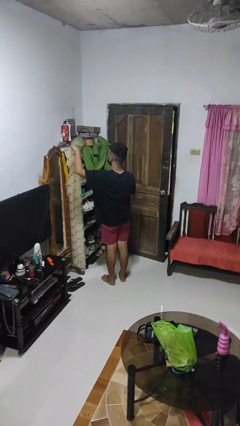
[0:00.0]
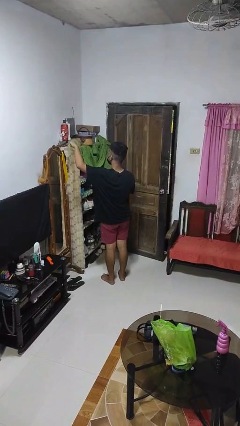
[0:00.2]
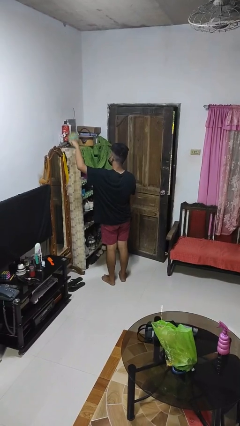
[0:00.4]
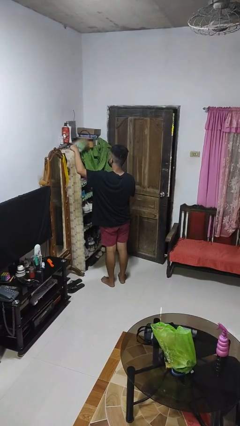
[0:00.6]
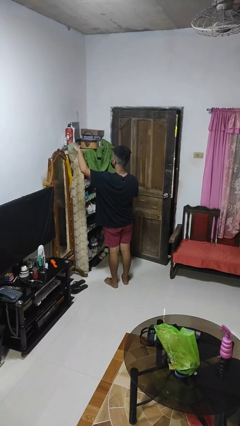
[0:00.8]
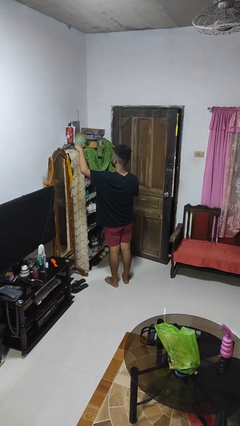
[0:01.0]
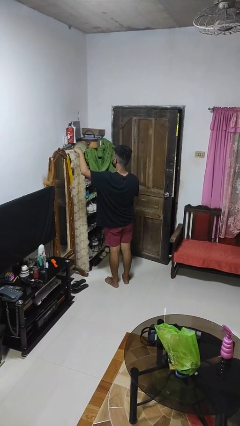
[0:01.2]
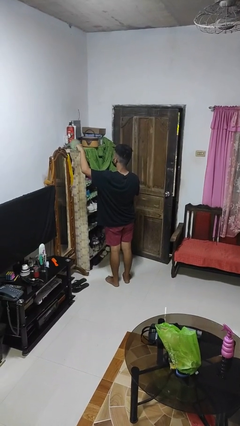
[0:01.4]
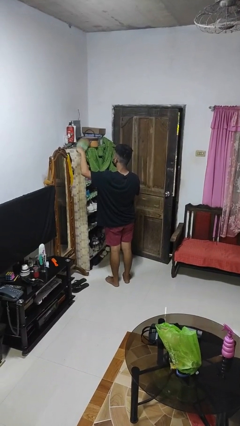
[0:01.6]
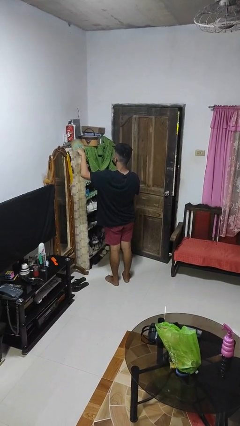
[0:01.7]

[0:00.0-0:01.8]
person dusts furniture

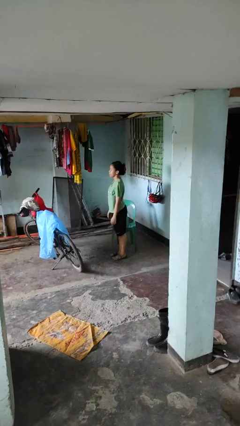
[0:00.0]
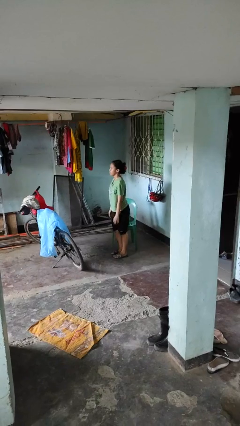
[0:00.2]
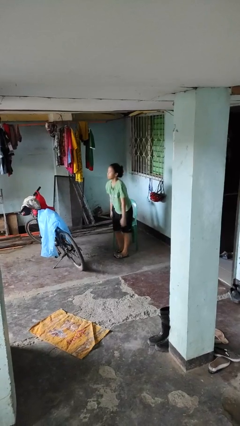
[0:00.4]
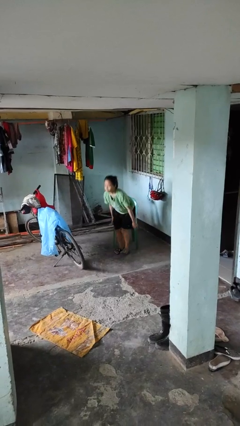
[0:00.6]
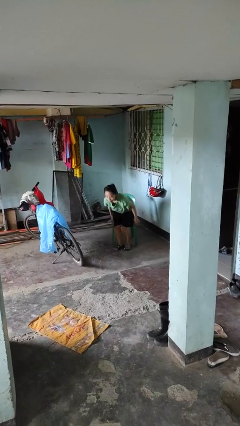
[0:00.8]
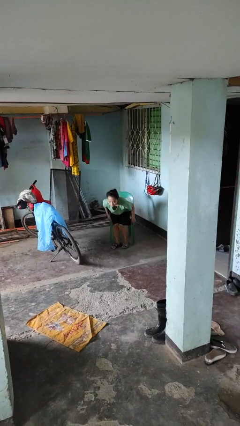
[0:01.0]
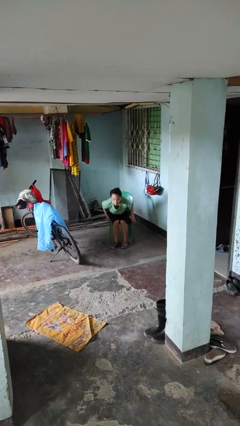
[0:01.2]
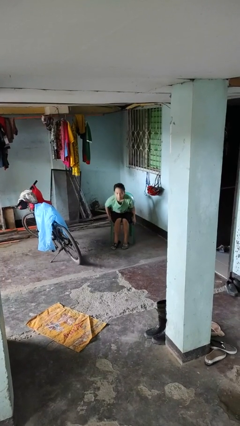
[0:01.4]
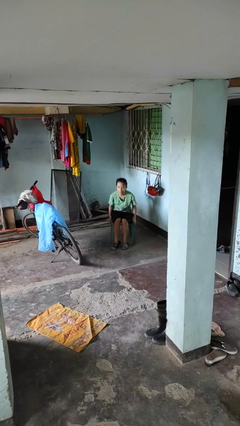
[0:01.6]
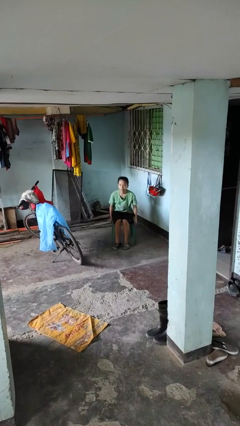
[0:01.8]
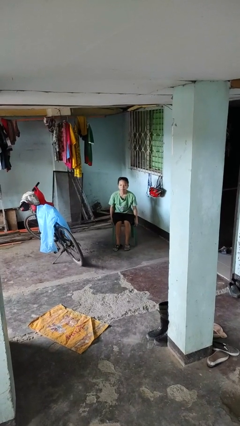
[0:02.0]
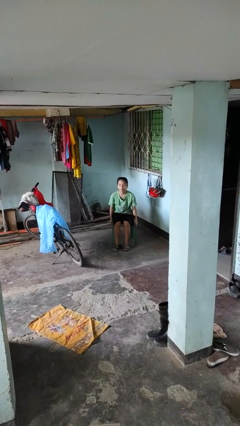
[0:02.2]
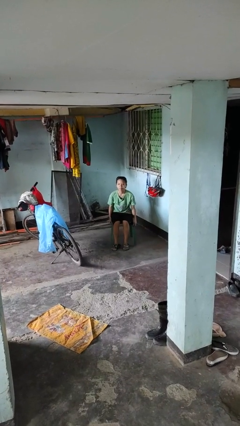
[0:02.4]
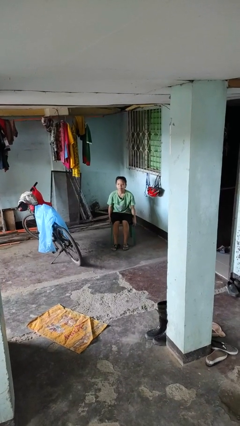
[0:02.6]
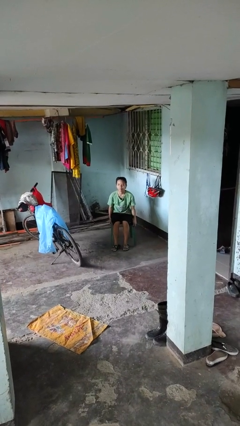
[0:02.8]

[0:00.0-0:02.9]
person sits down

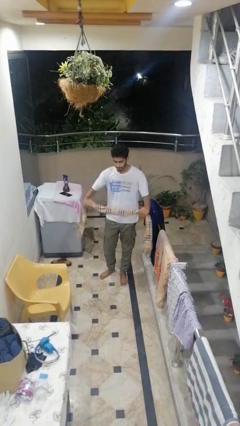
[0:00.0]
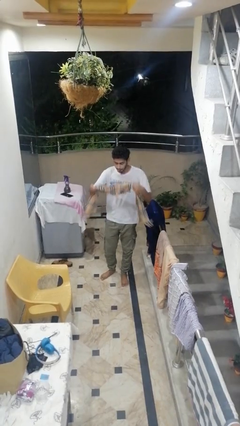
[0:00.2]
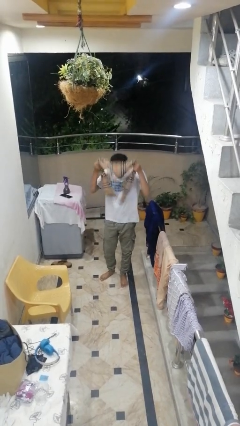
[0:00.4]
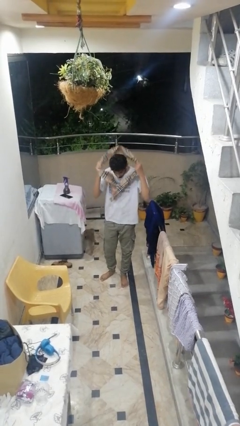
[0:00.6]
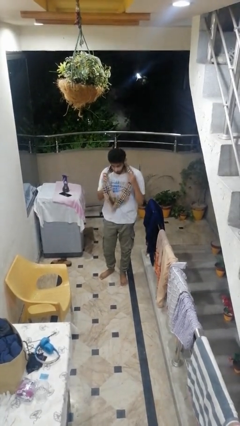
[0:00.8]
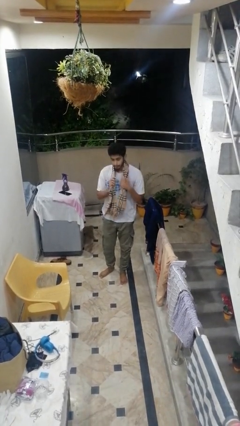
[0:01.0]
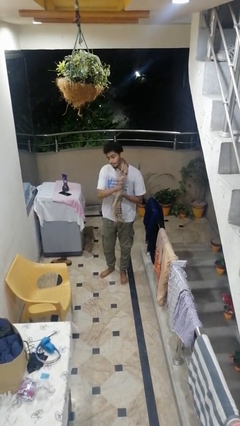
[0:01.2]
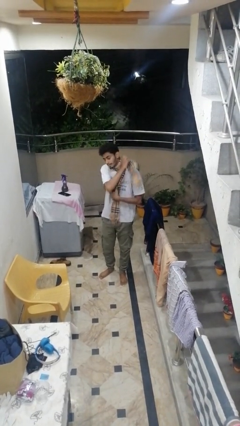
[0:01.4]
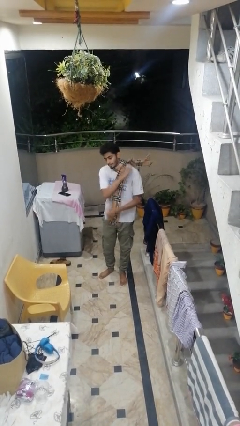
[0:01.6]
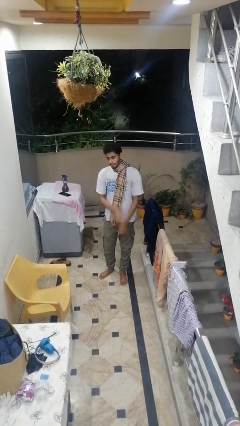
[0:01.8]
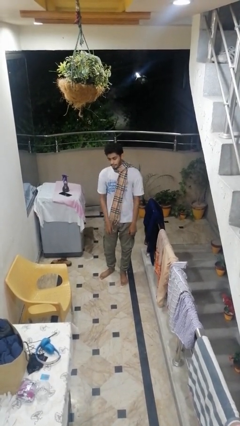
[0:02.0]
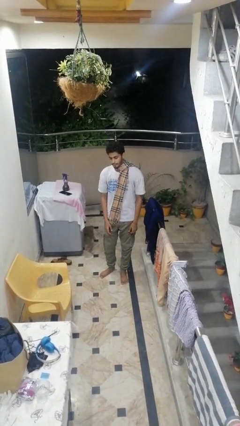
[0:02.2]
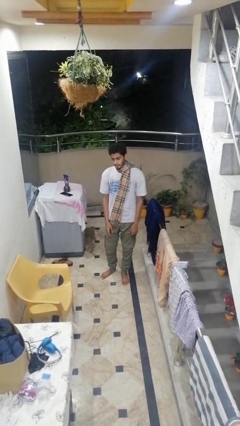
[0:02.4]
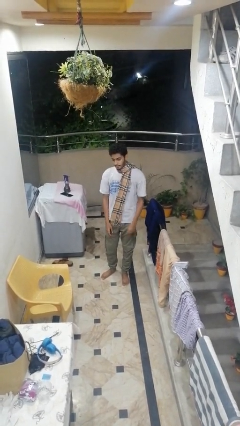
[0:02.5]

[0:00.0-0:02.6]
person puts on scarf

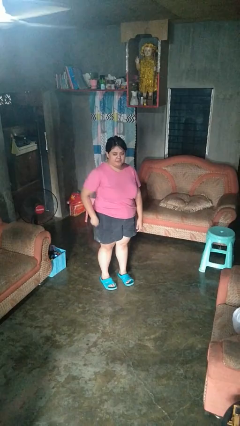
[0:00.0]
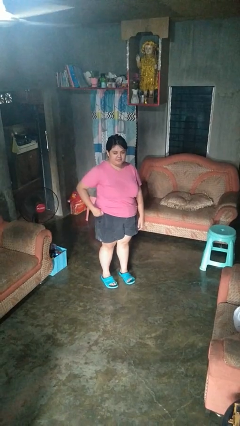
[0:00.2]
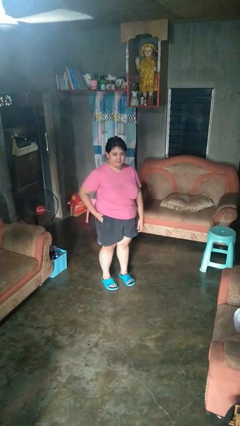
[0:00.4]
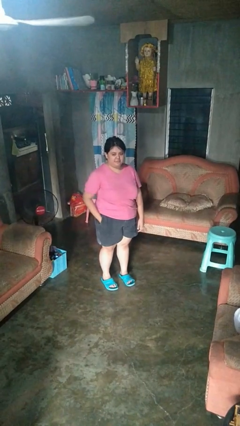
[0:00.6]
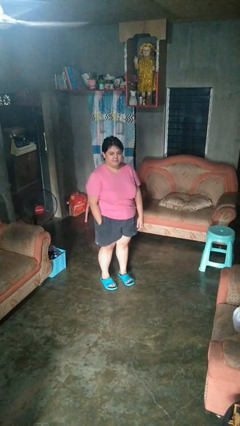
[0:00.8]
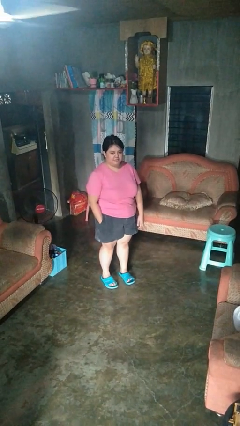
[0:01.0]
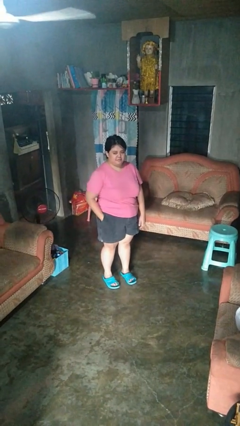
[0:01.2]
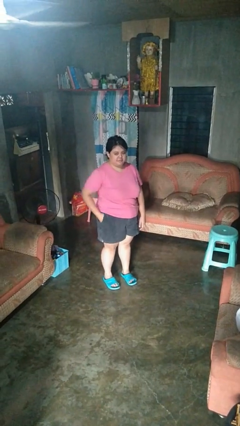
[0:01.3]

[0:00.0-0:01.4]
person takes phone from pocket

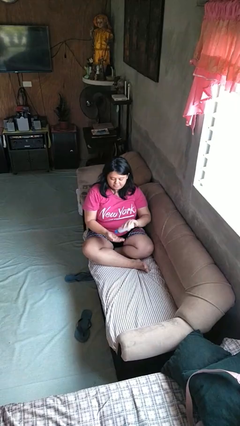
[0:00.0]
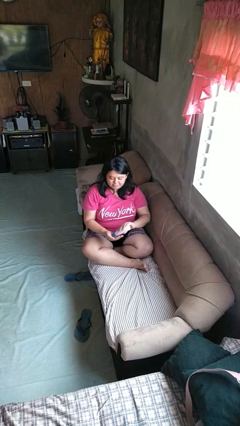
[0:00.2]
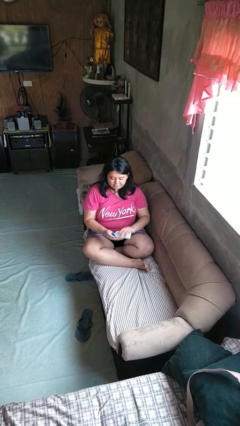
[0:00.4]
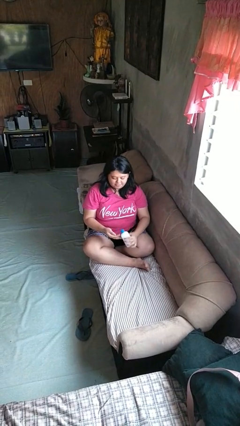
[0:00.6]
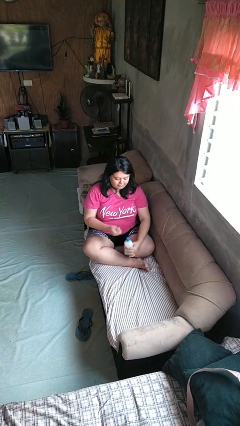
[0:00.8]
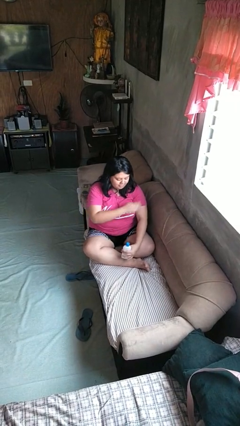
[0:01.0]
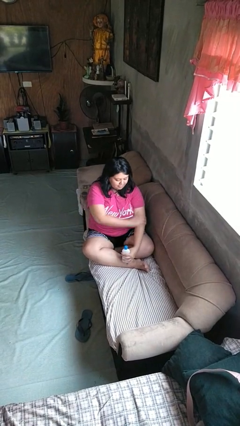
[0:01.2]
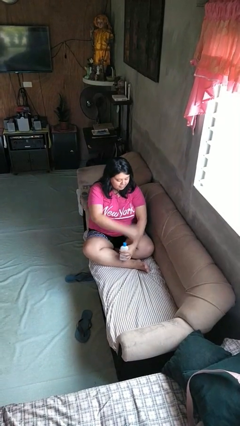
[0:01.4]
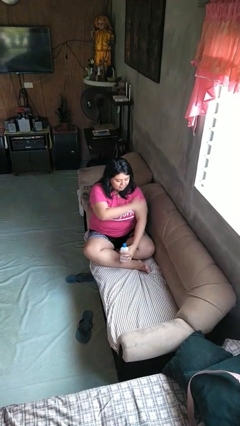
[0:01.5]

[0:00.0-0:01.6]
person applies sunscreen

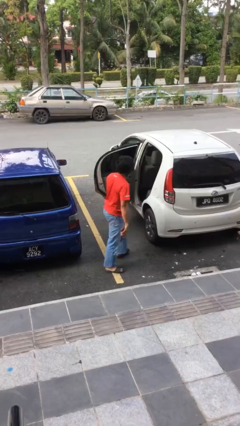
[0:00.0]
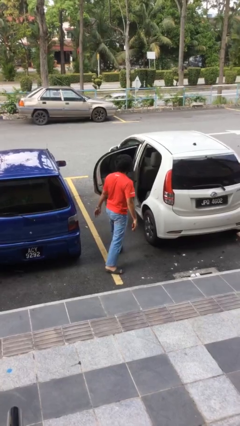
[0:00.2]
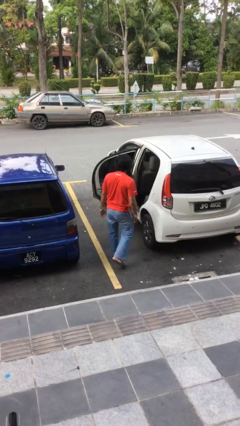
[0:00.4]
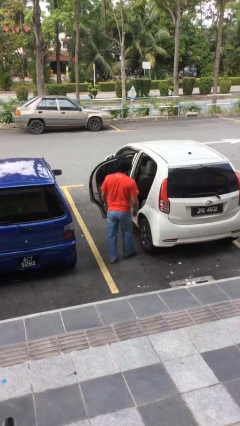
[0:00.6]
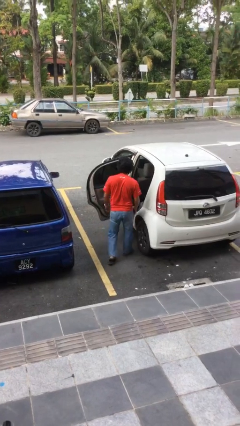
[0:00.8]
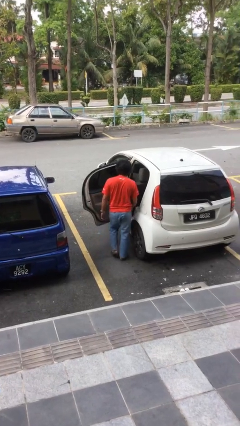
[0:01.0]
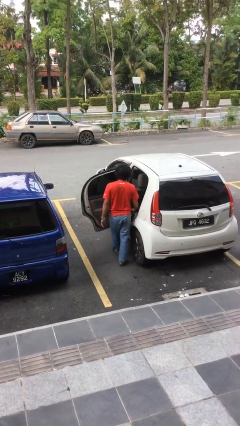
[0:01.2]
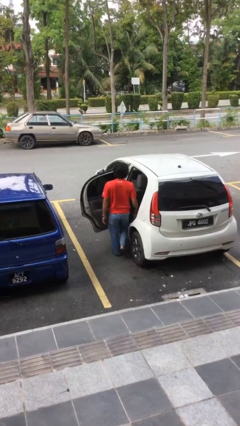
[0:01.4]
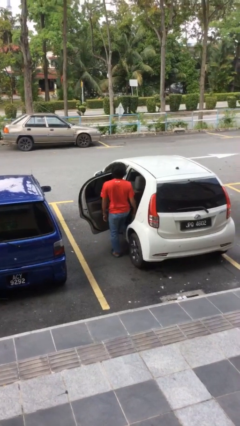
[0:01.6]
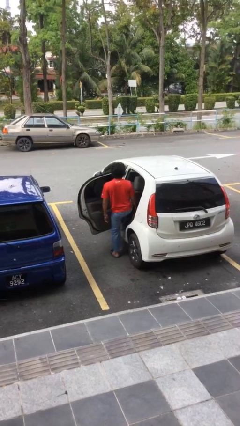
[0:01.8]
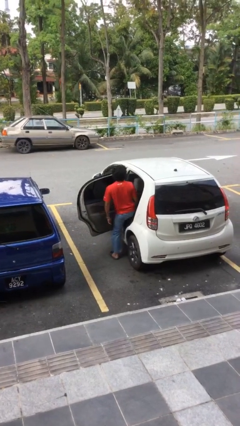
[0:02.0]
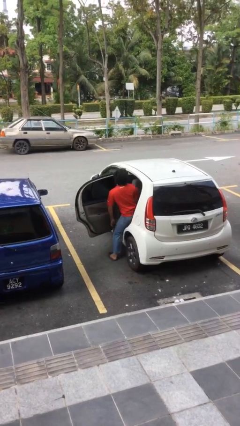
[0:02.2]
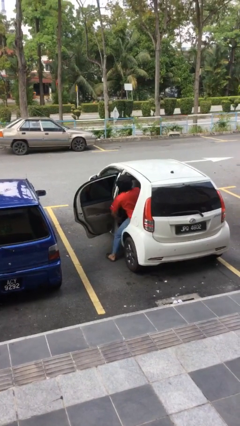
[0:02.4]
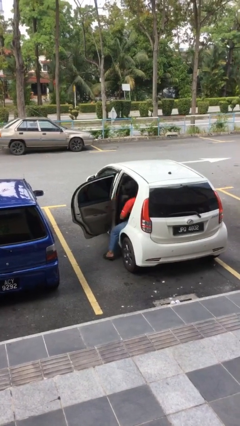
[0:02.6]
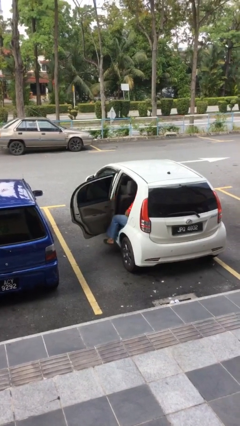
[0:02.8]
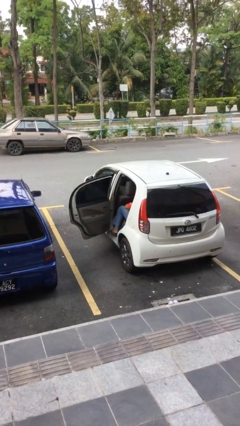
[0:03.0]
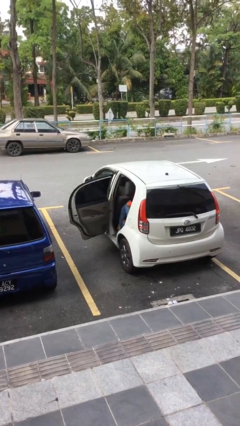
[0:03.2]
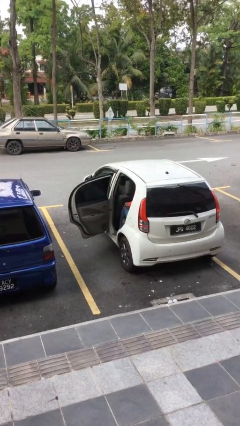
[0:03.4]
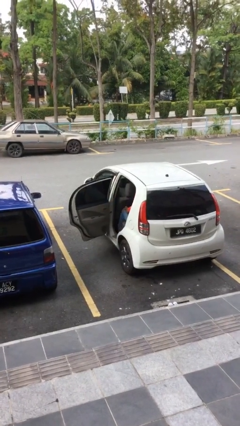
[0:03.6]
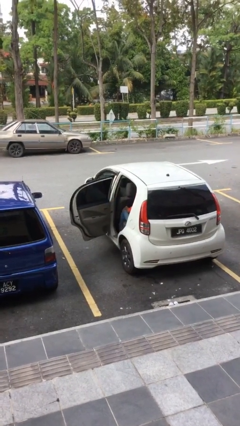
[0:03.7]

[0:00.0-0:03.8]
person enters car

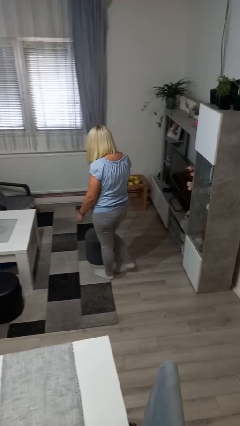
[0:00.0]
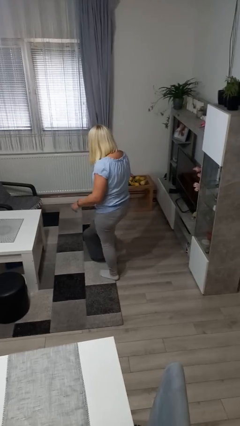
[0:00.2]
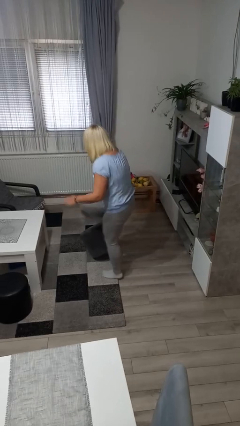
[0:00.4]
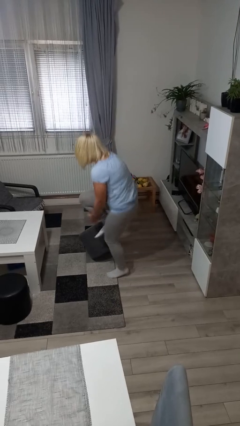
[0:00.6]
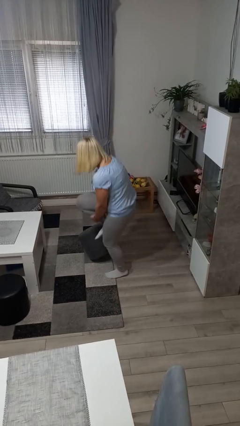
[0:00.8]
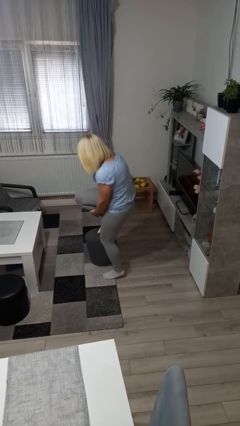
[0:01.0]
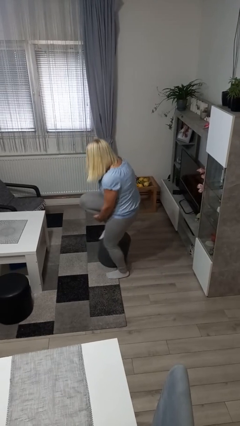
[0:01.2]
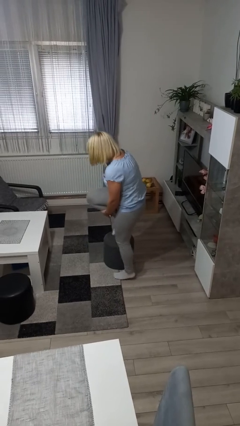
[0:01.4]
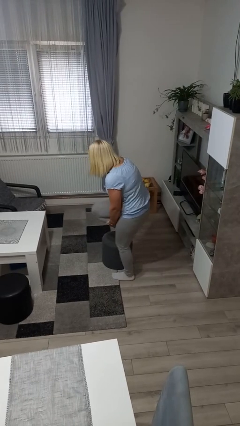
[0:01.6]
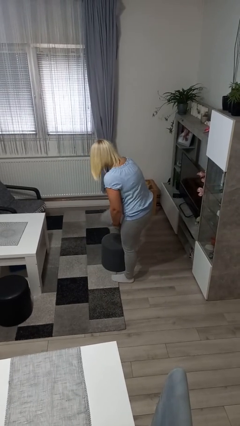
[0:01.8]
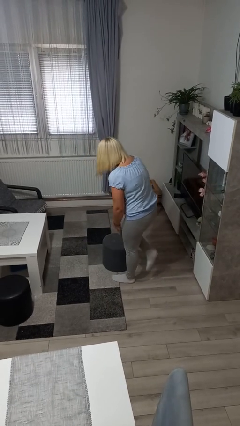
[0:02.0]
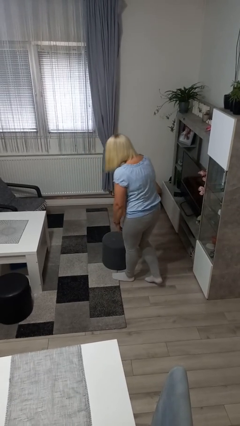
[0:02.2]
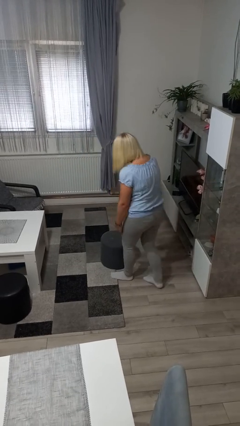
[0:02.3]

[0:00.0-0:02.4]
person stubs toe

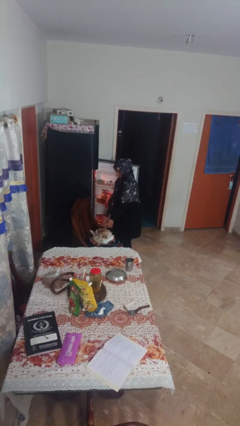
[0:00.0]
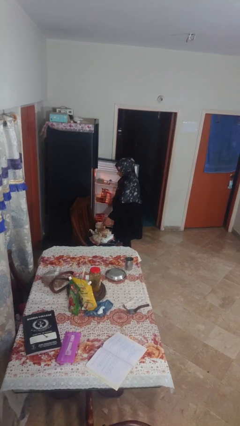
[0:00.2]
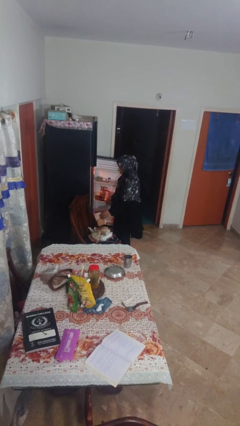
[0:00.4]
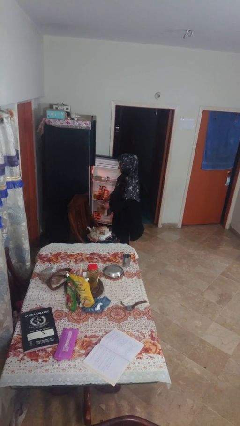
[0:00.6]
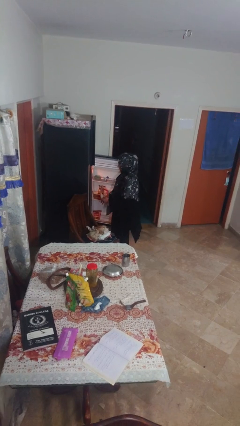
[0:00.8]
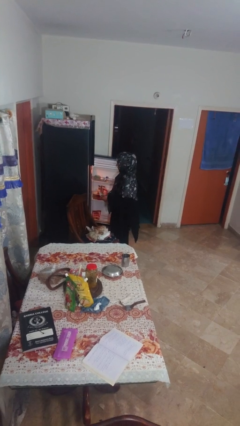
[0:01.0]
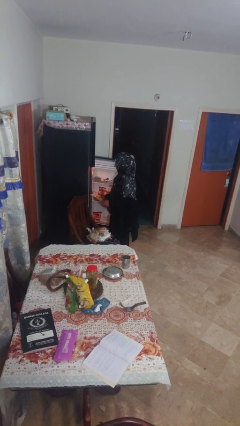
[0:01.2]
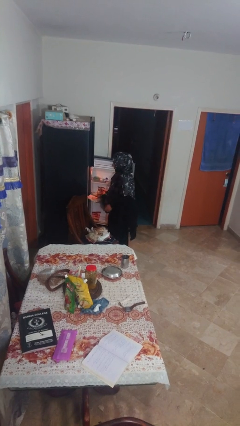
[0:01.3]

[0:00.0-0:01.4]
person loads groceries into refrigerator
